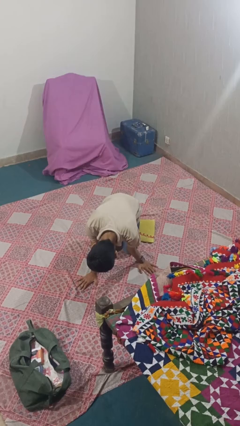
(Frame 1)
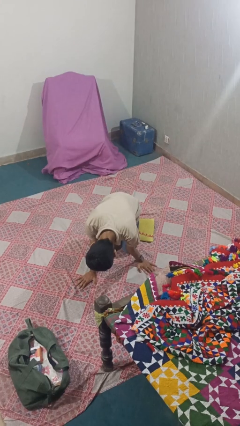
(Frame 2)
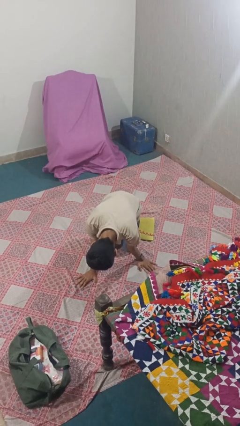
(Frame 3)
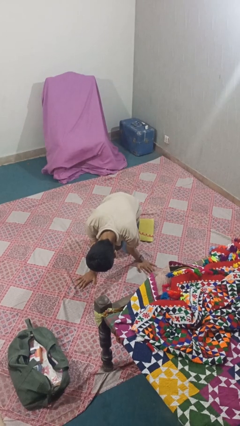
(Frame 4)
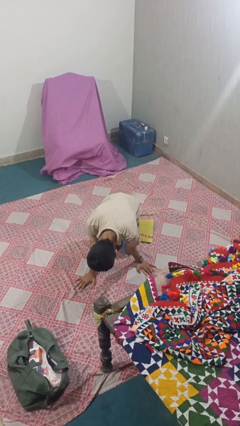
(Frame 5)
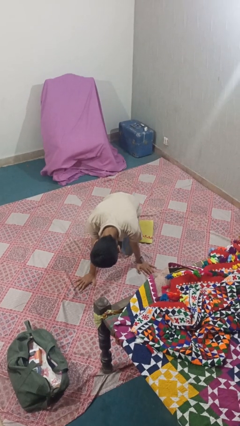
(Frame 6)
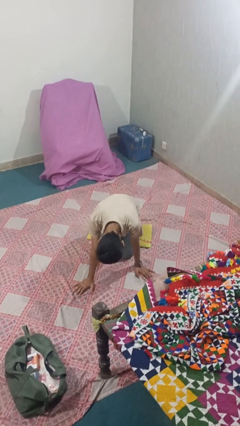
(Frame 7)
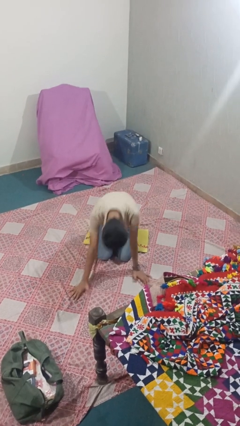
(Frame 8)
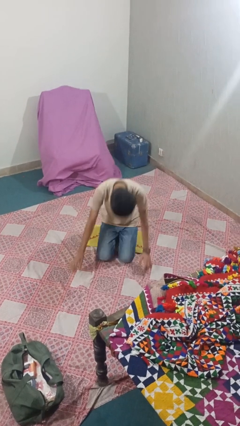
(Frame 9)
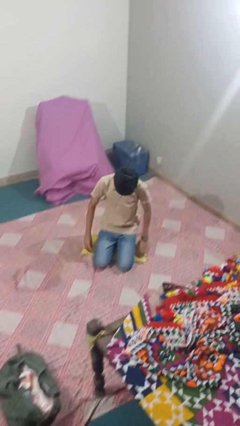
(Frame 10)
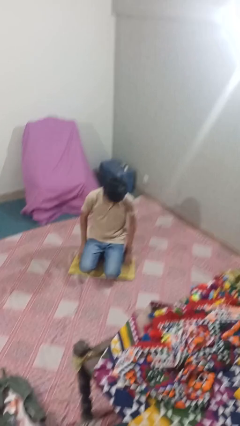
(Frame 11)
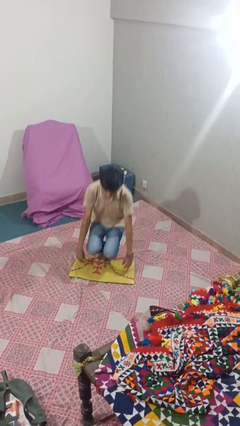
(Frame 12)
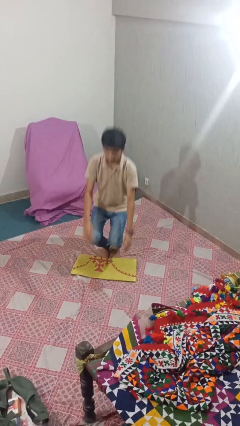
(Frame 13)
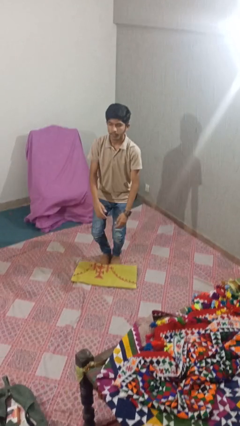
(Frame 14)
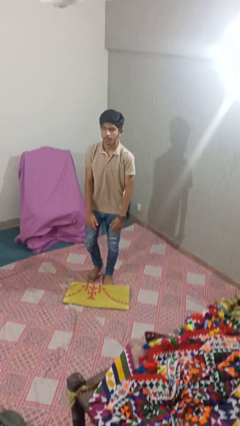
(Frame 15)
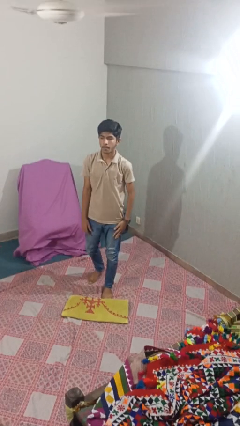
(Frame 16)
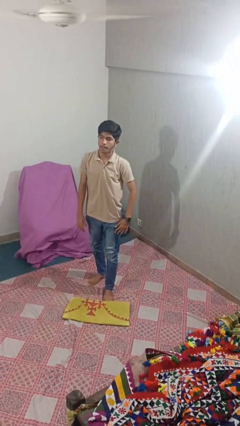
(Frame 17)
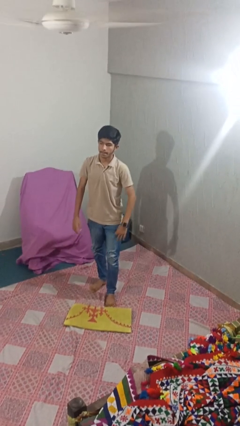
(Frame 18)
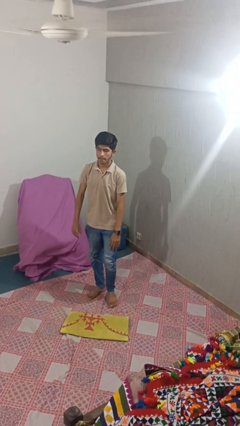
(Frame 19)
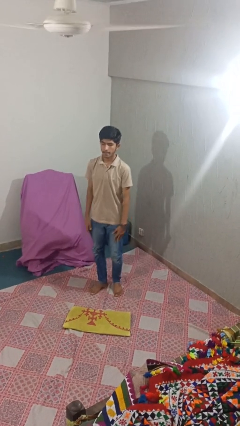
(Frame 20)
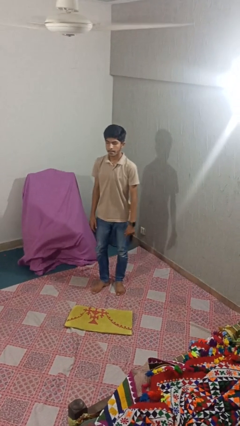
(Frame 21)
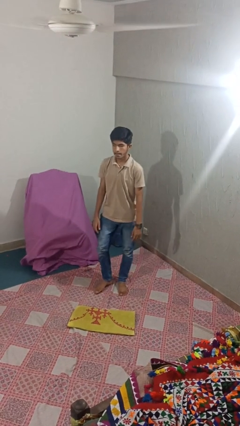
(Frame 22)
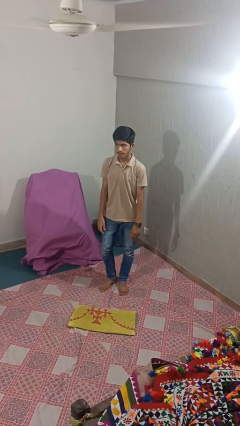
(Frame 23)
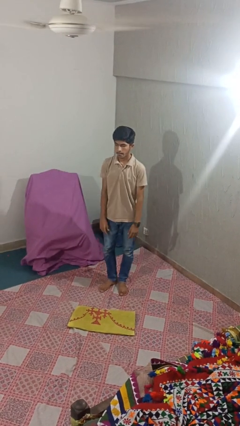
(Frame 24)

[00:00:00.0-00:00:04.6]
person stands up from floor

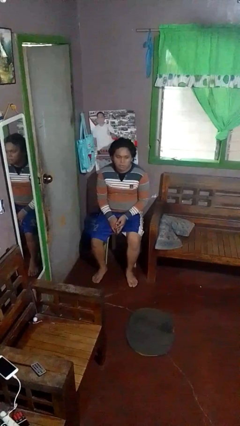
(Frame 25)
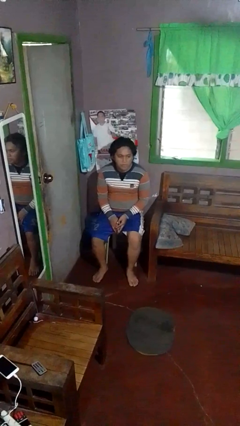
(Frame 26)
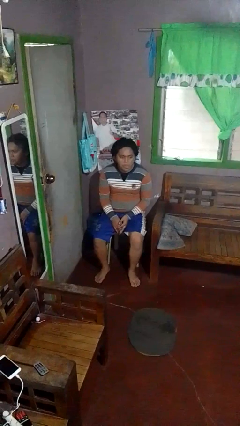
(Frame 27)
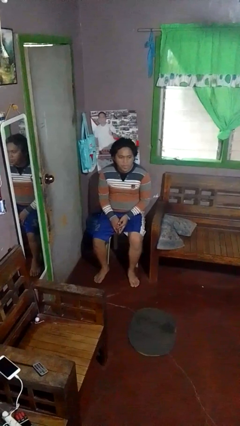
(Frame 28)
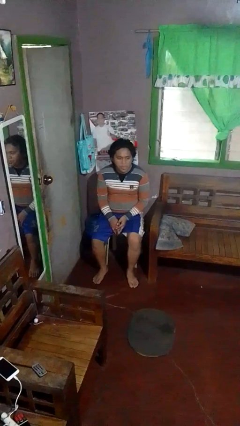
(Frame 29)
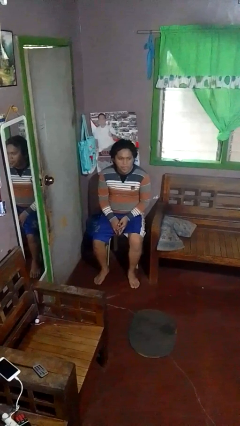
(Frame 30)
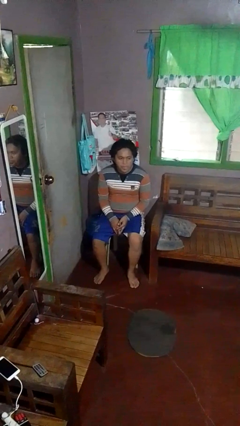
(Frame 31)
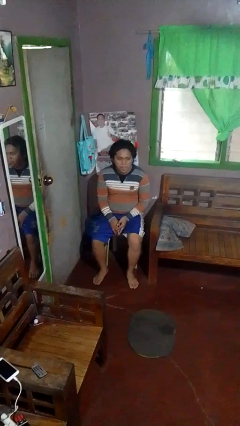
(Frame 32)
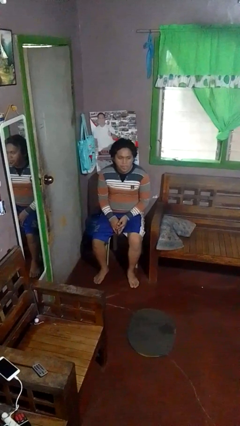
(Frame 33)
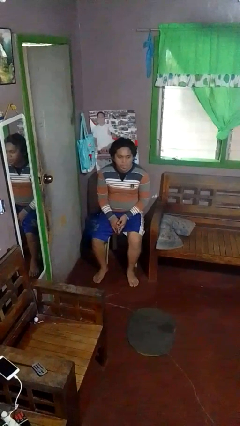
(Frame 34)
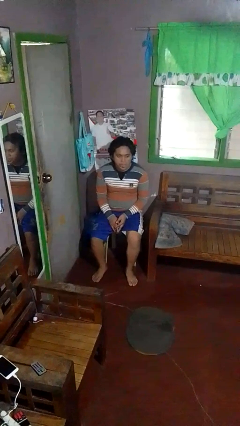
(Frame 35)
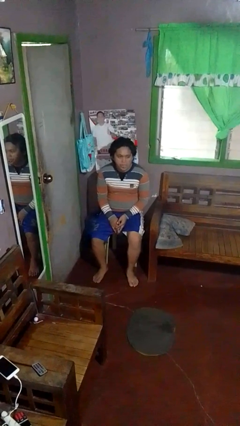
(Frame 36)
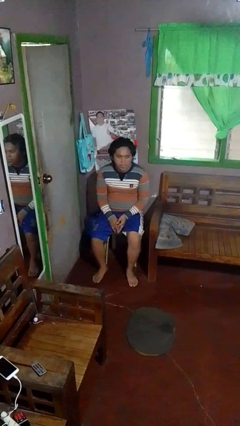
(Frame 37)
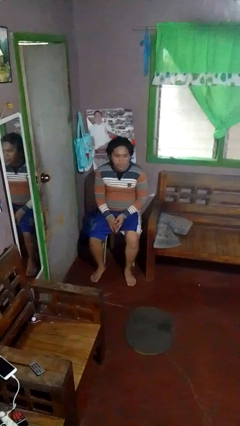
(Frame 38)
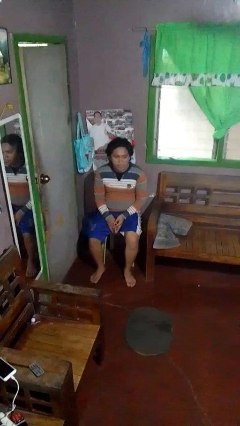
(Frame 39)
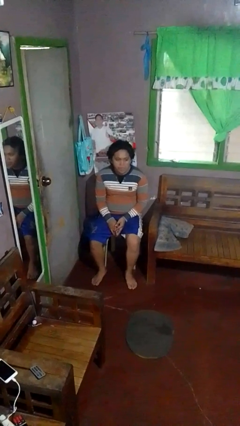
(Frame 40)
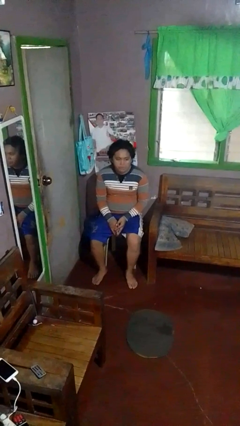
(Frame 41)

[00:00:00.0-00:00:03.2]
person sticks out tongue

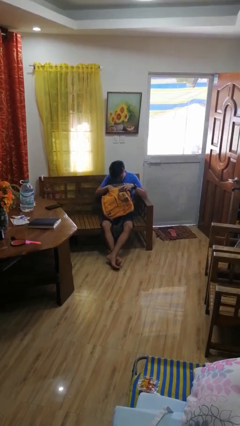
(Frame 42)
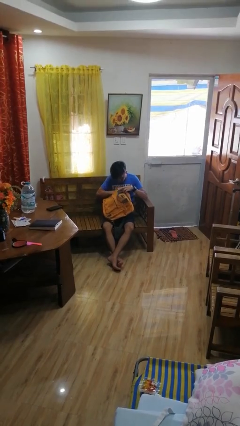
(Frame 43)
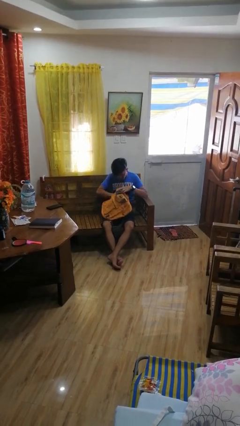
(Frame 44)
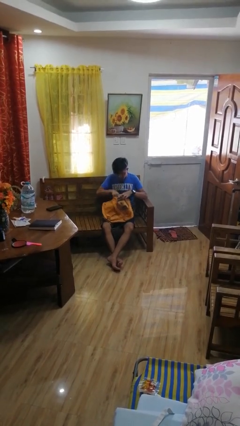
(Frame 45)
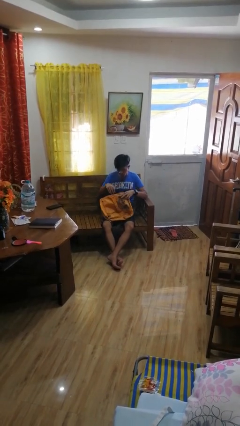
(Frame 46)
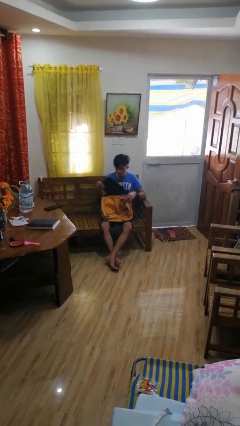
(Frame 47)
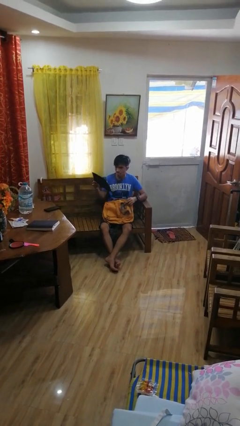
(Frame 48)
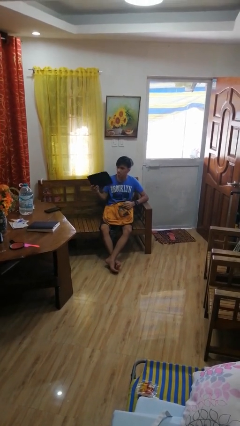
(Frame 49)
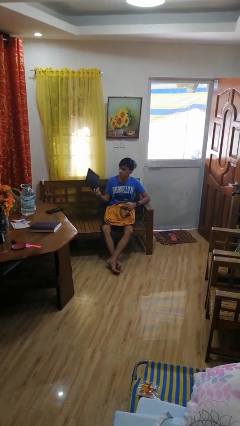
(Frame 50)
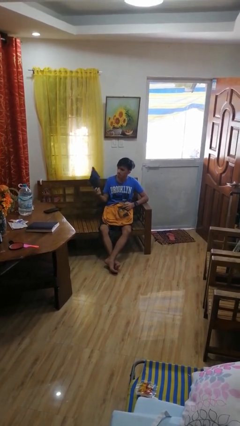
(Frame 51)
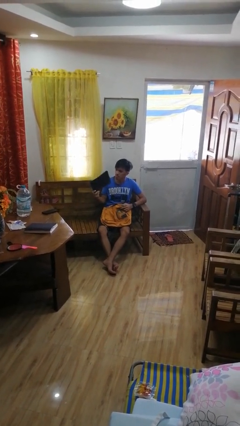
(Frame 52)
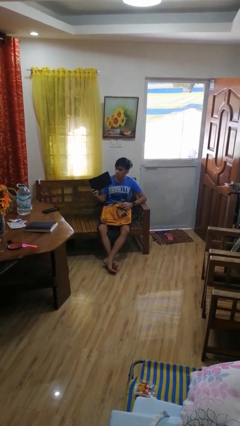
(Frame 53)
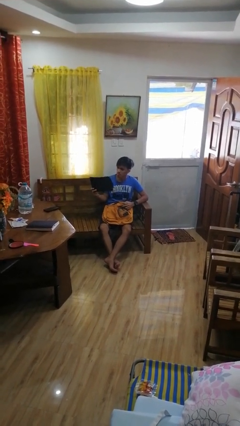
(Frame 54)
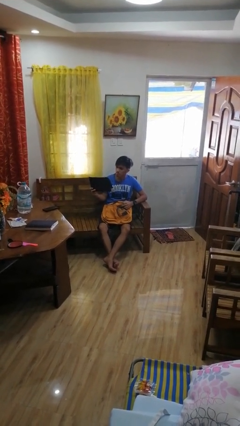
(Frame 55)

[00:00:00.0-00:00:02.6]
person takes object from backpack

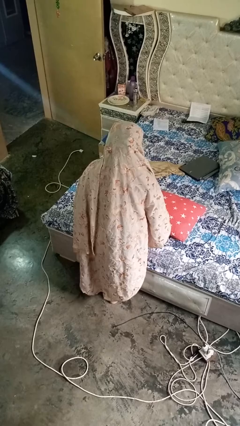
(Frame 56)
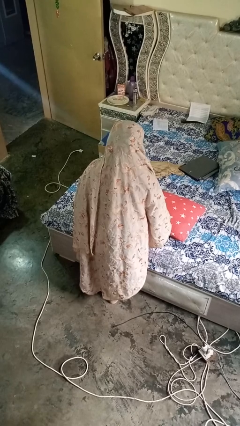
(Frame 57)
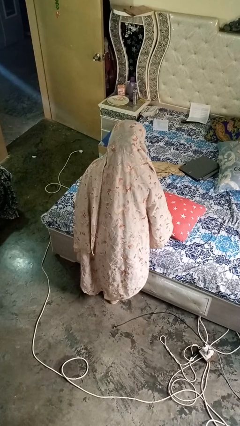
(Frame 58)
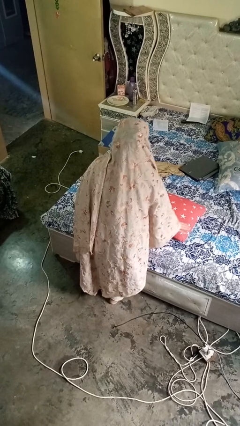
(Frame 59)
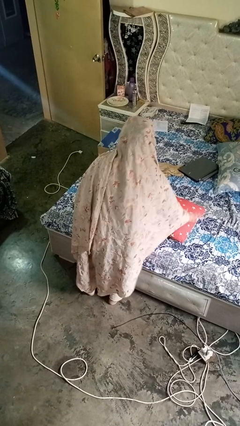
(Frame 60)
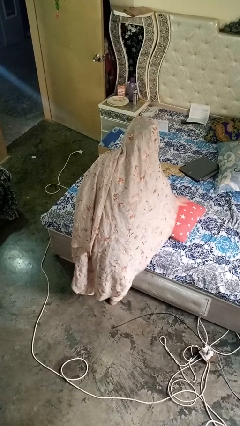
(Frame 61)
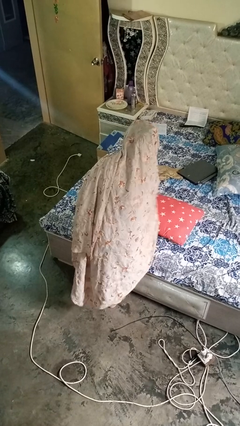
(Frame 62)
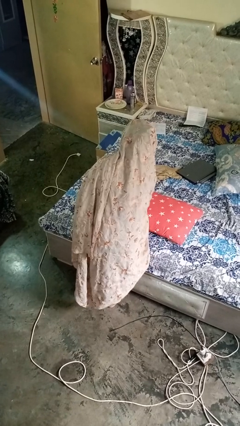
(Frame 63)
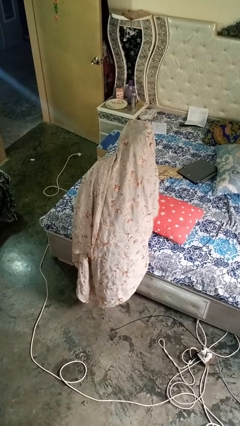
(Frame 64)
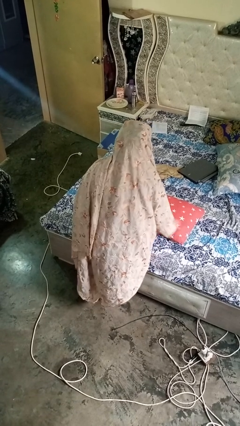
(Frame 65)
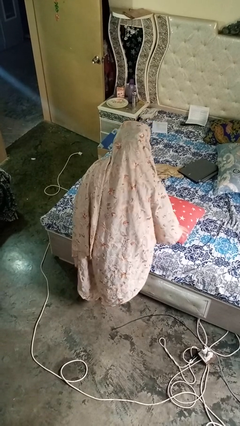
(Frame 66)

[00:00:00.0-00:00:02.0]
person waves hand over object

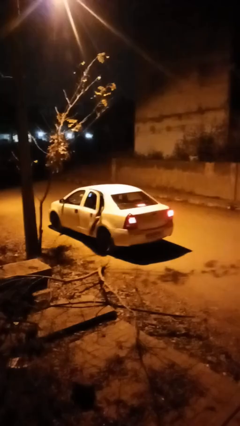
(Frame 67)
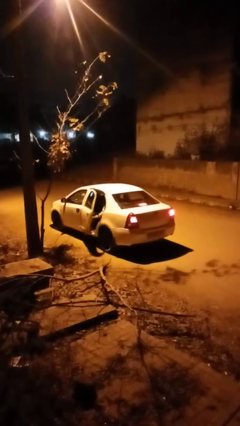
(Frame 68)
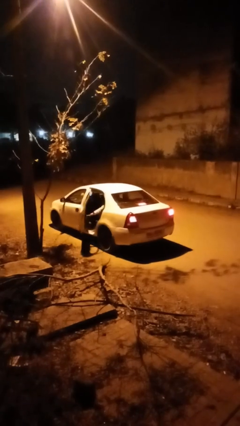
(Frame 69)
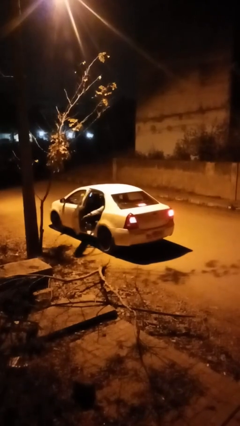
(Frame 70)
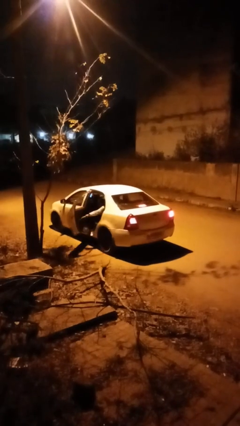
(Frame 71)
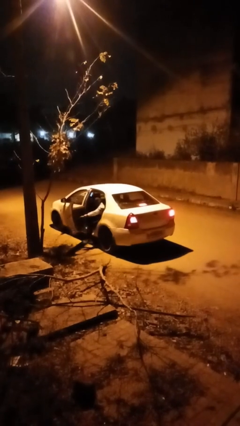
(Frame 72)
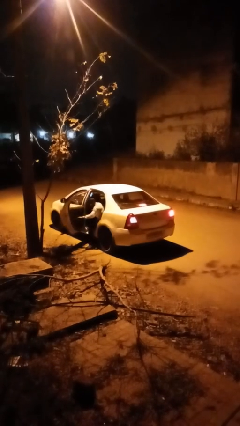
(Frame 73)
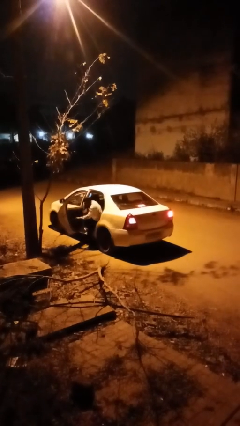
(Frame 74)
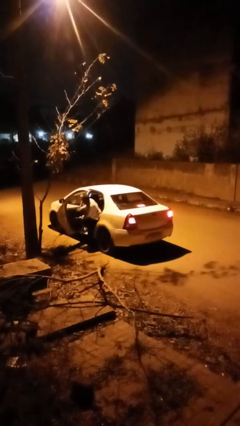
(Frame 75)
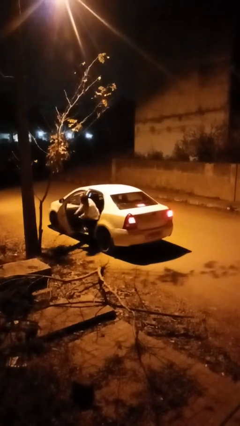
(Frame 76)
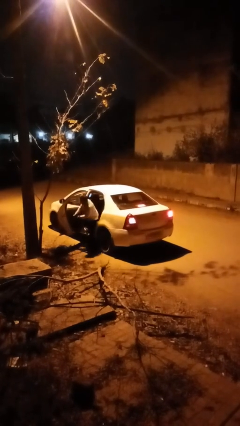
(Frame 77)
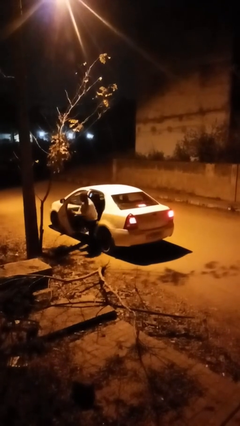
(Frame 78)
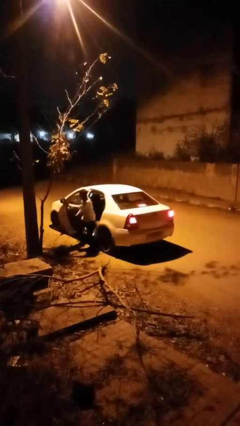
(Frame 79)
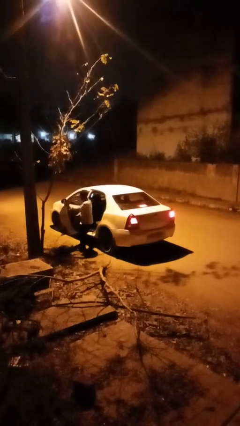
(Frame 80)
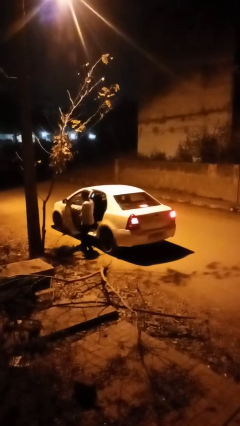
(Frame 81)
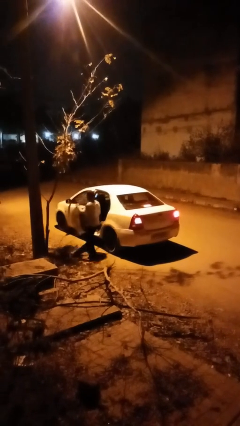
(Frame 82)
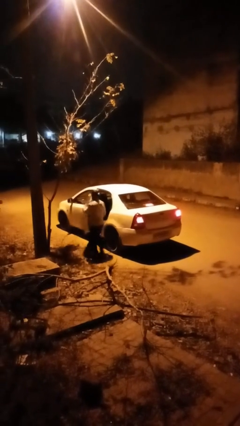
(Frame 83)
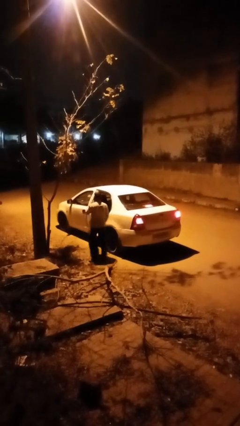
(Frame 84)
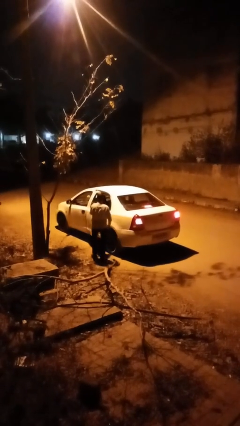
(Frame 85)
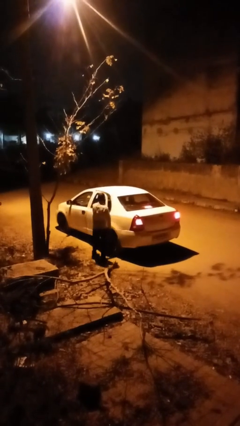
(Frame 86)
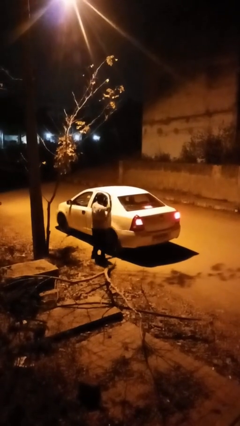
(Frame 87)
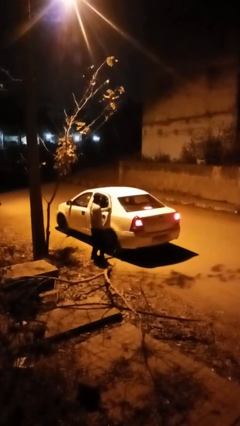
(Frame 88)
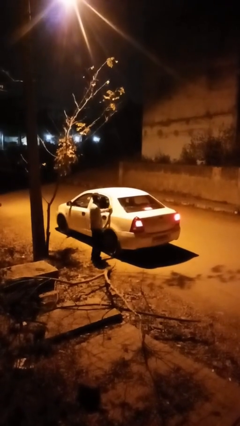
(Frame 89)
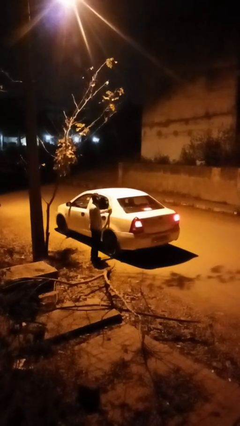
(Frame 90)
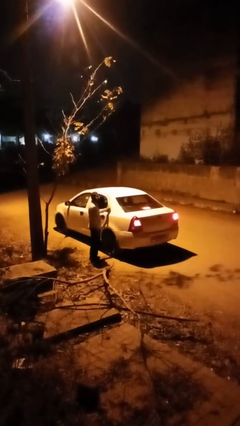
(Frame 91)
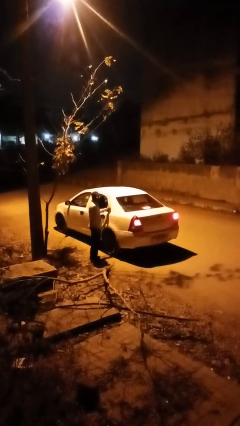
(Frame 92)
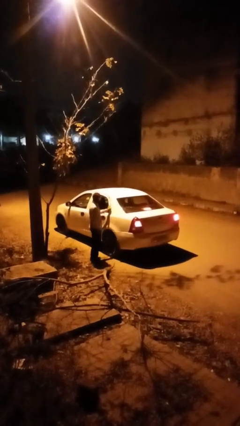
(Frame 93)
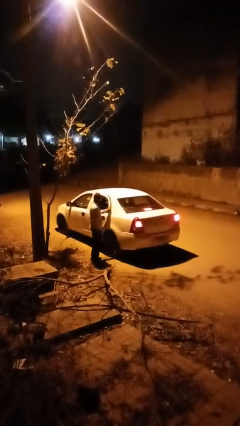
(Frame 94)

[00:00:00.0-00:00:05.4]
car drops off person
